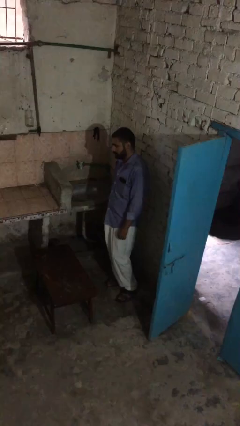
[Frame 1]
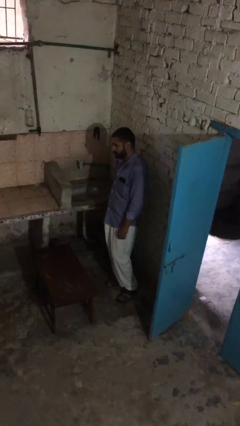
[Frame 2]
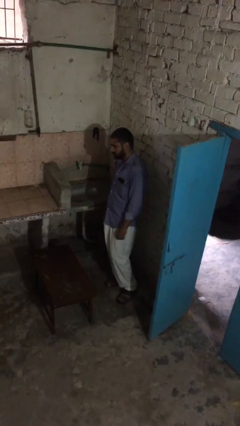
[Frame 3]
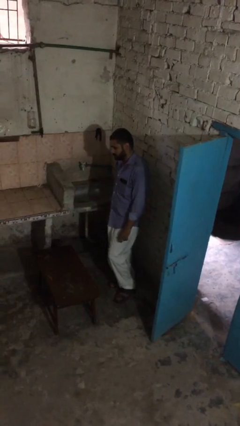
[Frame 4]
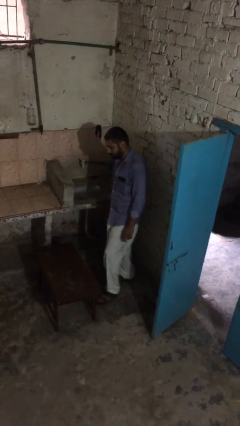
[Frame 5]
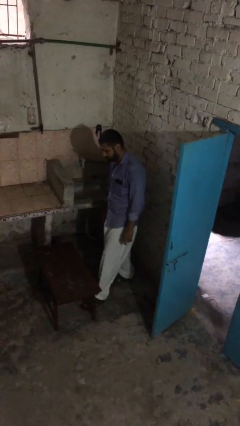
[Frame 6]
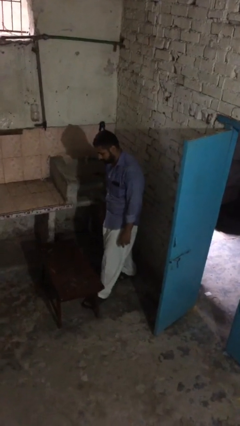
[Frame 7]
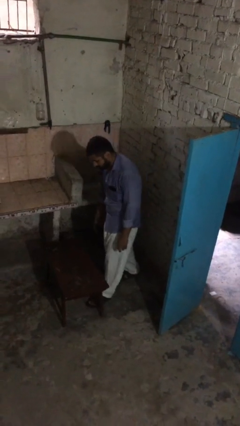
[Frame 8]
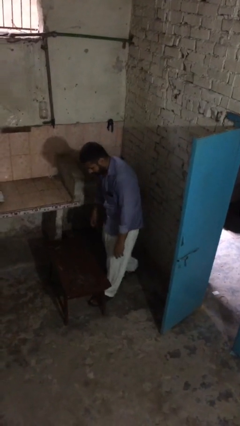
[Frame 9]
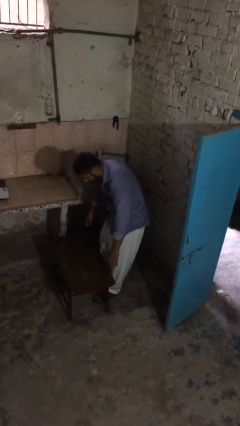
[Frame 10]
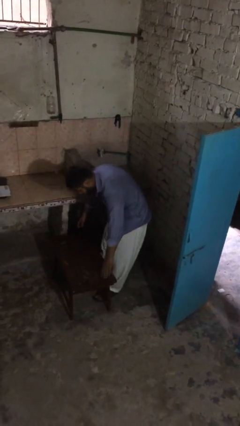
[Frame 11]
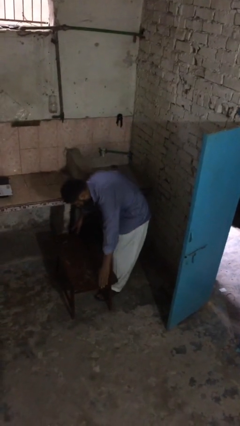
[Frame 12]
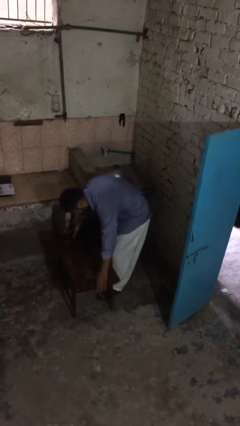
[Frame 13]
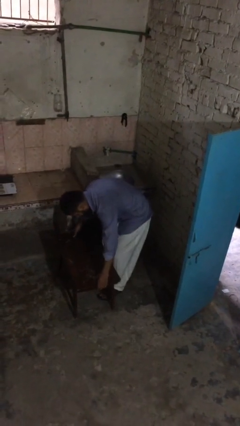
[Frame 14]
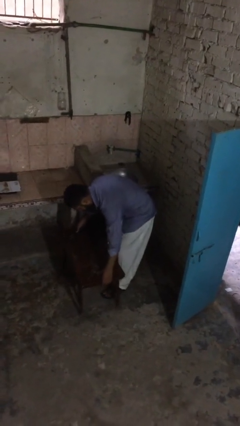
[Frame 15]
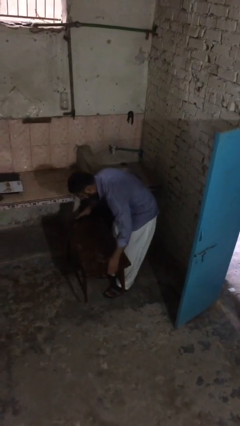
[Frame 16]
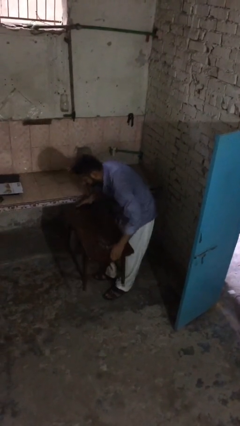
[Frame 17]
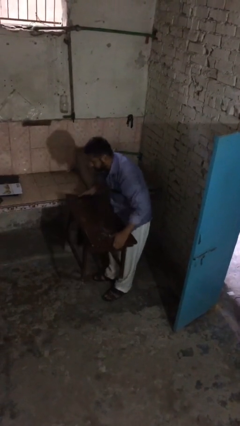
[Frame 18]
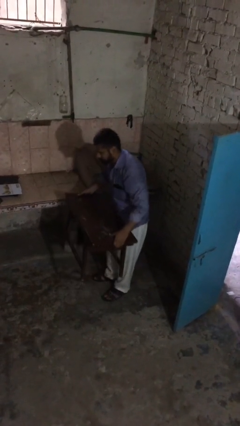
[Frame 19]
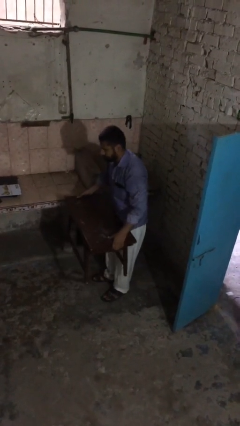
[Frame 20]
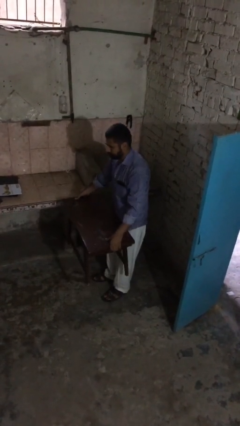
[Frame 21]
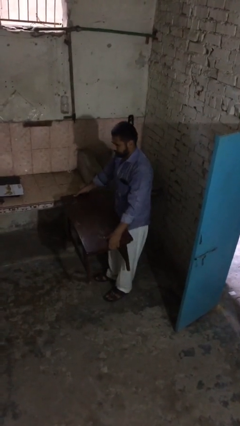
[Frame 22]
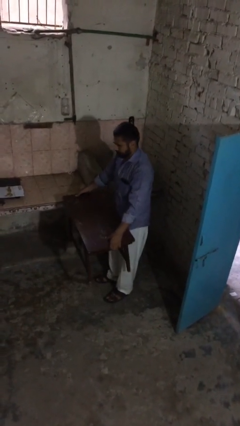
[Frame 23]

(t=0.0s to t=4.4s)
person picks up object from floor

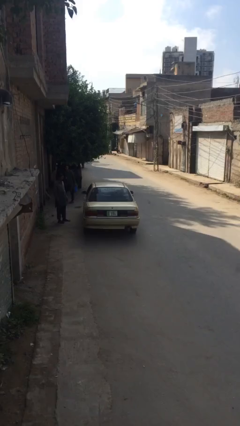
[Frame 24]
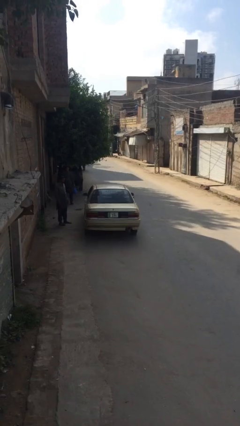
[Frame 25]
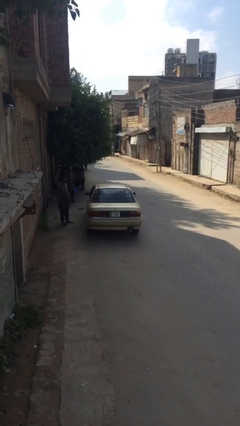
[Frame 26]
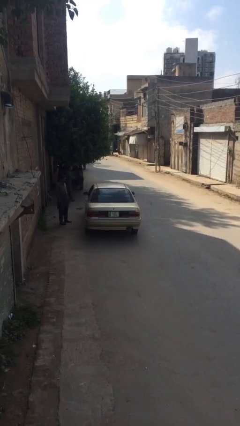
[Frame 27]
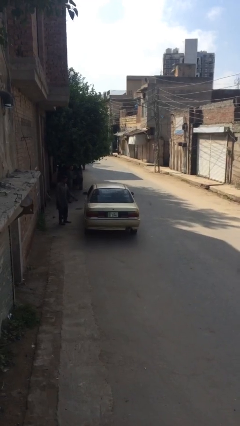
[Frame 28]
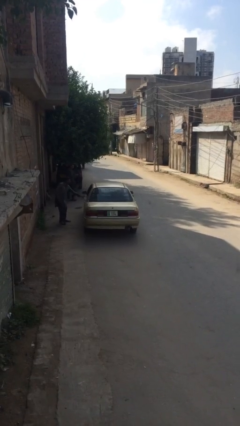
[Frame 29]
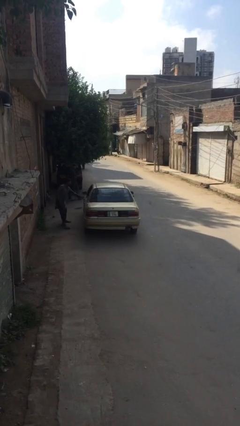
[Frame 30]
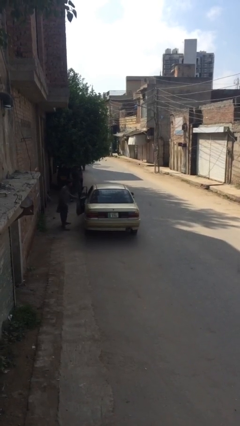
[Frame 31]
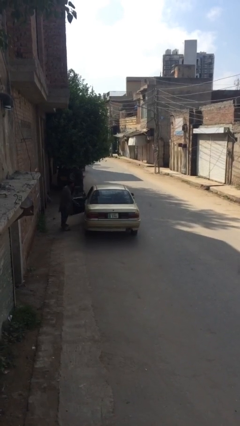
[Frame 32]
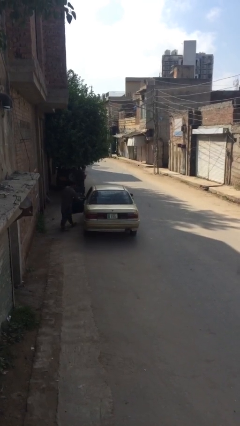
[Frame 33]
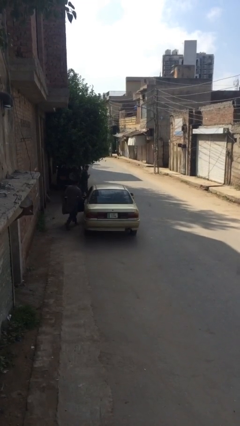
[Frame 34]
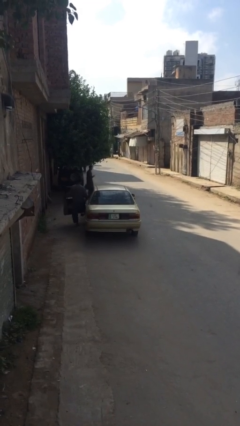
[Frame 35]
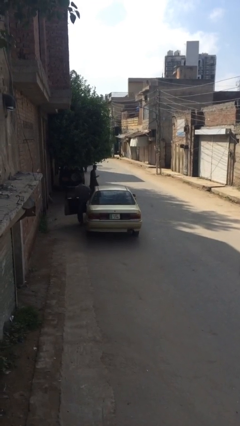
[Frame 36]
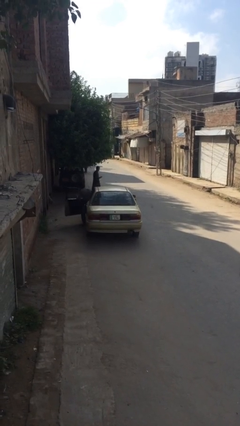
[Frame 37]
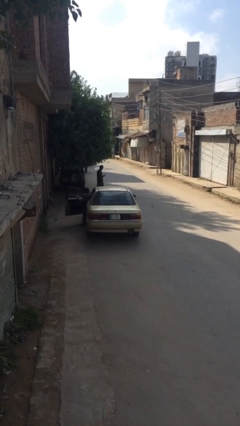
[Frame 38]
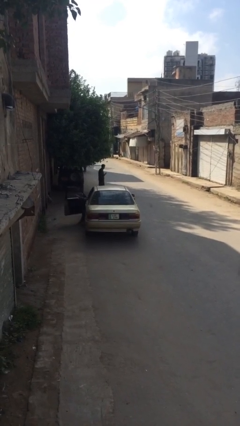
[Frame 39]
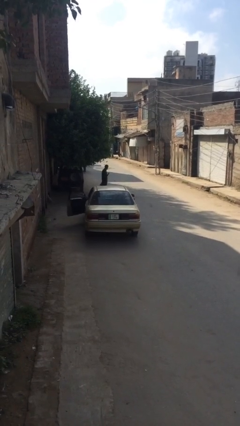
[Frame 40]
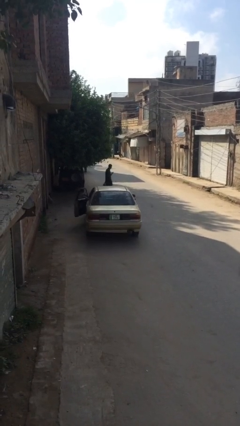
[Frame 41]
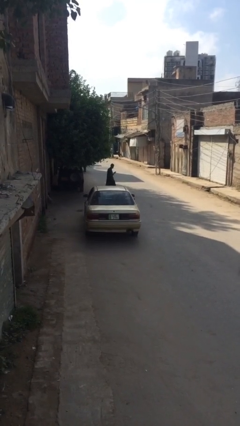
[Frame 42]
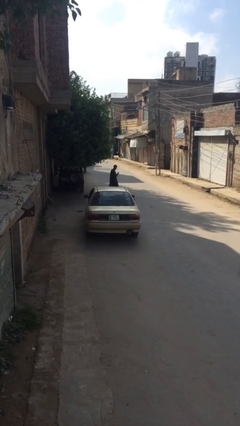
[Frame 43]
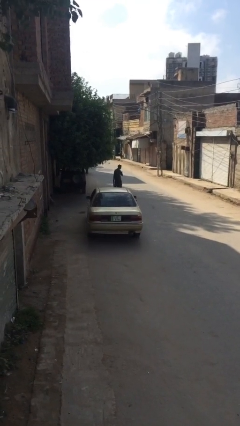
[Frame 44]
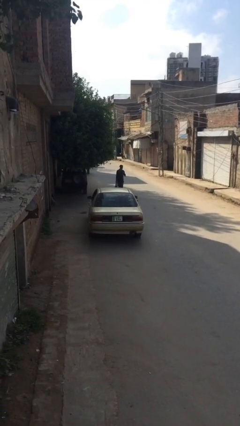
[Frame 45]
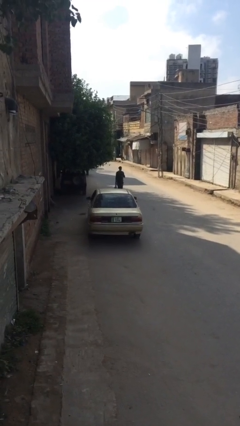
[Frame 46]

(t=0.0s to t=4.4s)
car picks up person

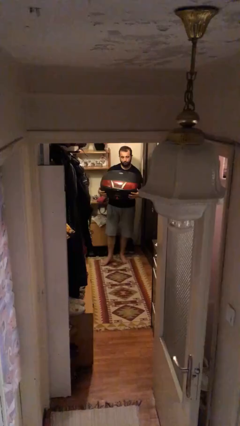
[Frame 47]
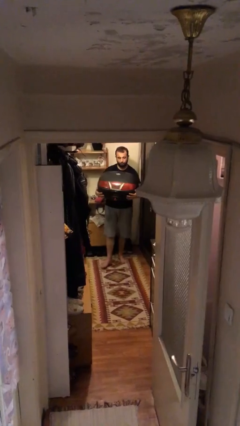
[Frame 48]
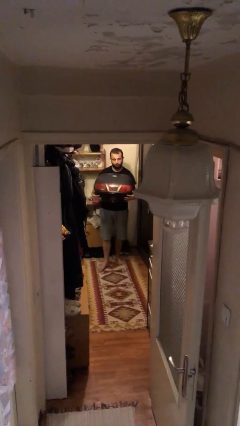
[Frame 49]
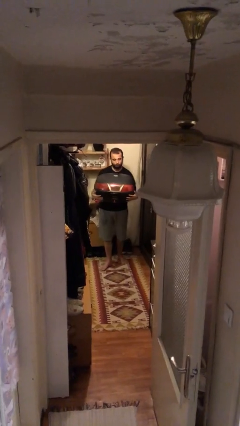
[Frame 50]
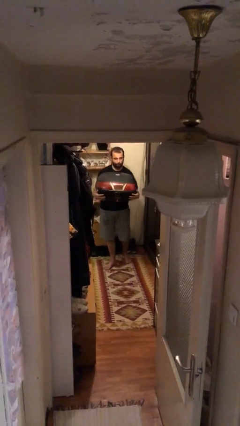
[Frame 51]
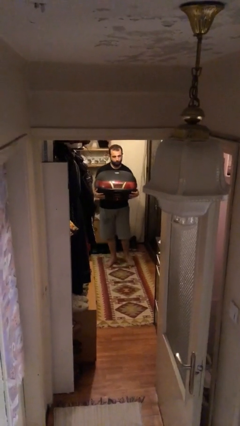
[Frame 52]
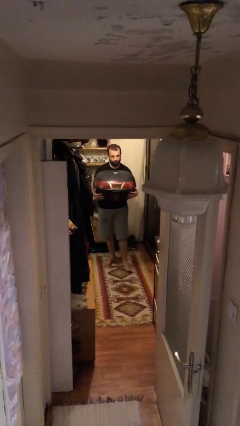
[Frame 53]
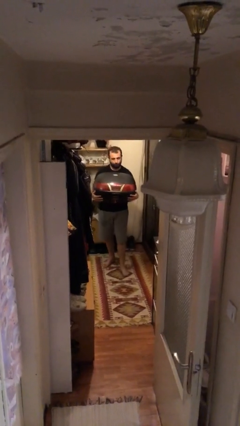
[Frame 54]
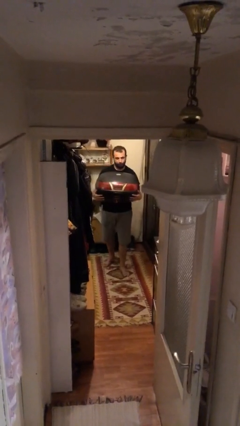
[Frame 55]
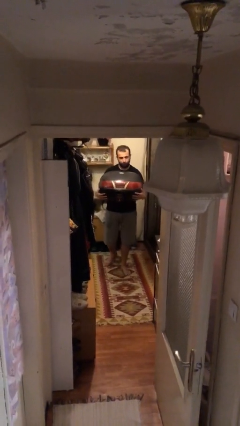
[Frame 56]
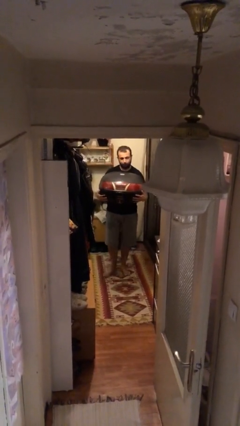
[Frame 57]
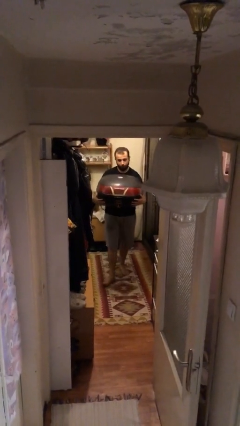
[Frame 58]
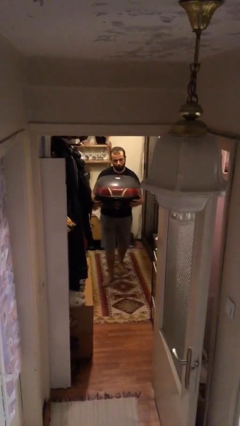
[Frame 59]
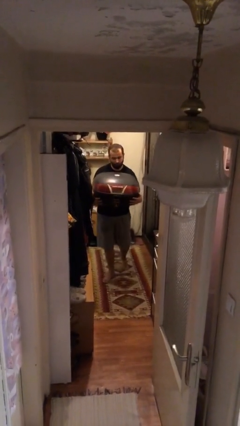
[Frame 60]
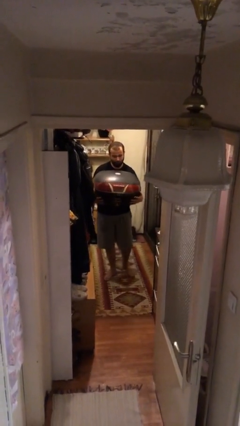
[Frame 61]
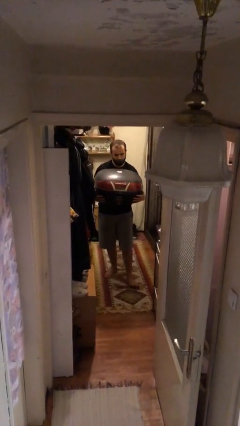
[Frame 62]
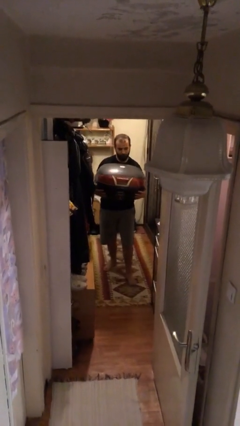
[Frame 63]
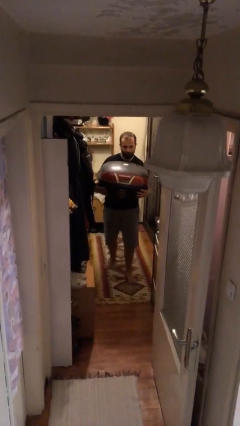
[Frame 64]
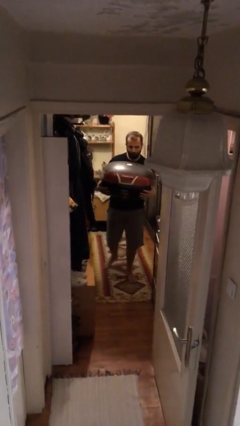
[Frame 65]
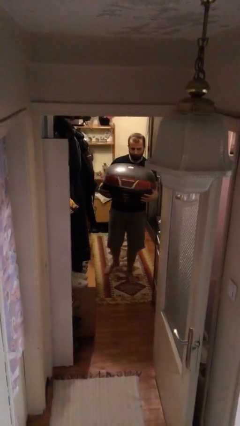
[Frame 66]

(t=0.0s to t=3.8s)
person carries heavy object

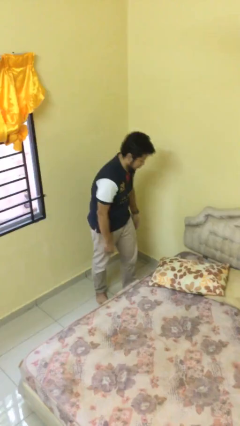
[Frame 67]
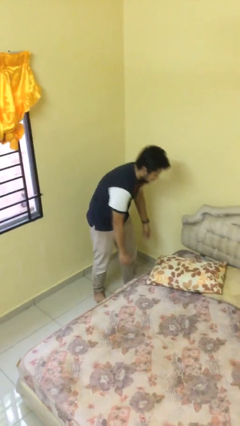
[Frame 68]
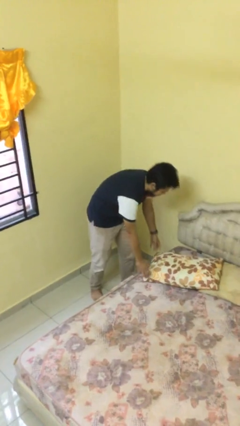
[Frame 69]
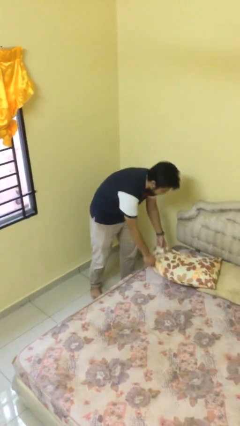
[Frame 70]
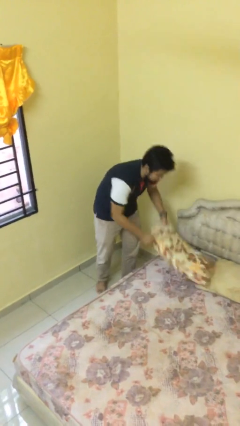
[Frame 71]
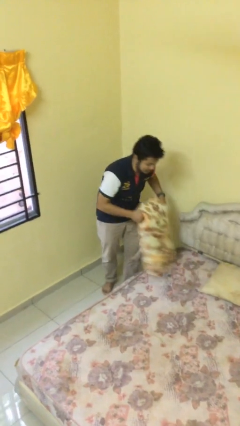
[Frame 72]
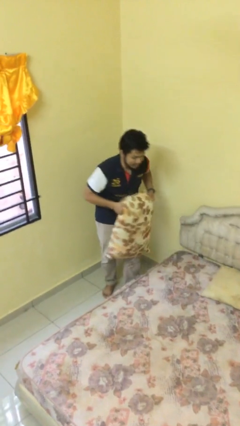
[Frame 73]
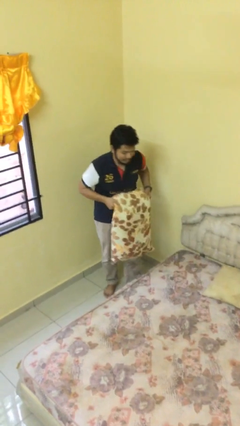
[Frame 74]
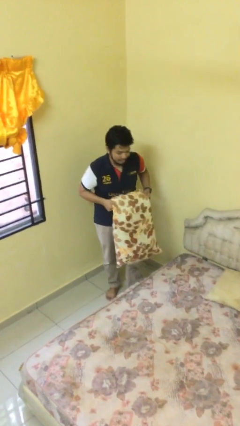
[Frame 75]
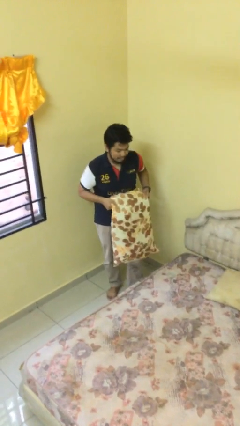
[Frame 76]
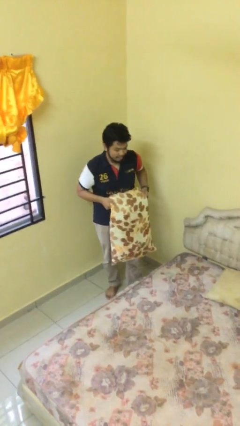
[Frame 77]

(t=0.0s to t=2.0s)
person picks up object from bed

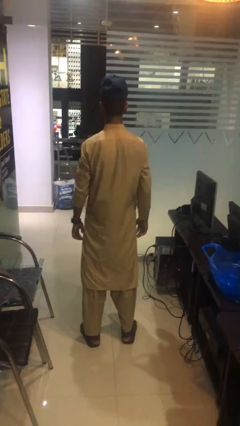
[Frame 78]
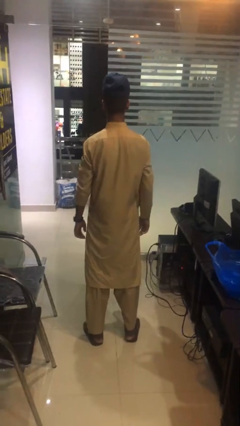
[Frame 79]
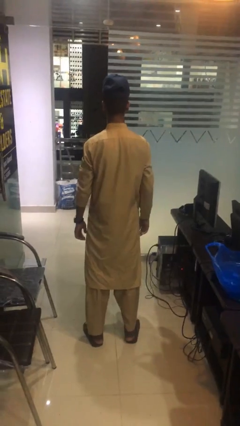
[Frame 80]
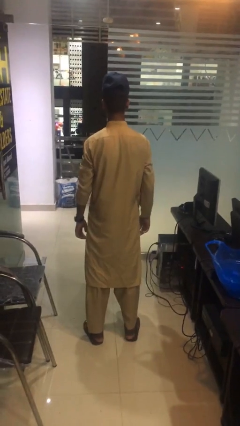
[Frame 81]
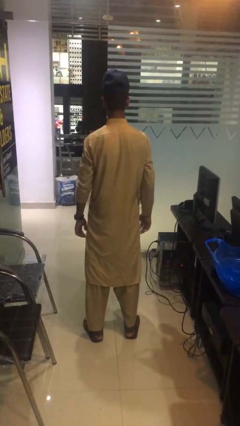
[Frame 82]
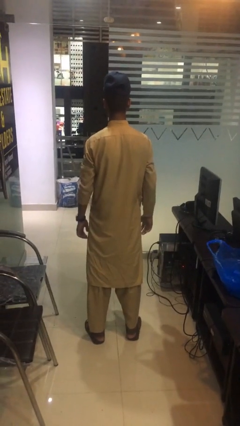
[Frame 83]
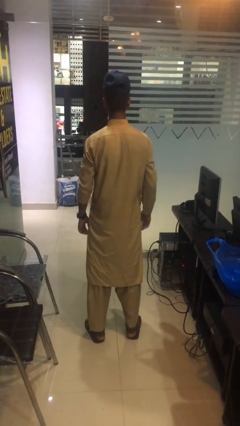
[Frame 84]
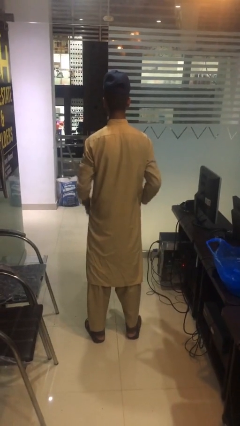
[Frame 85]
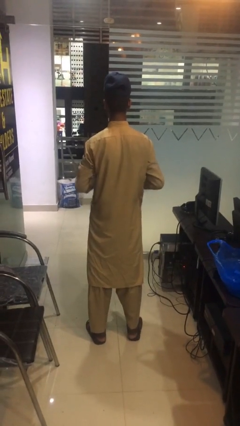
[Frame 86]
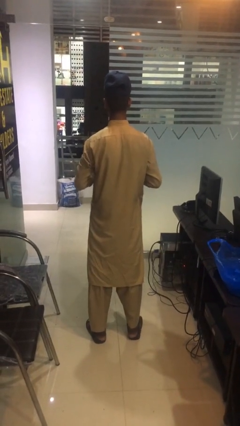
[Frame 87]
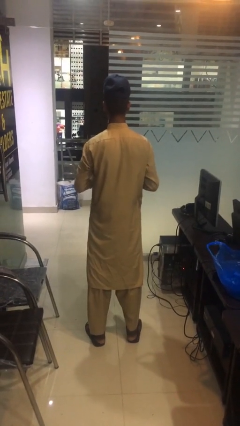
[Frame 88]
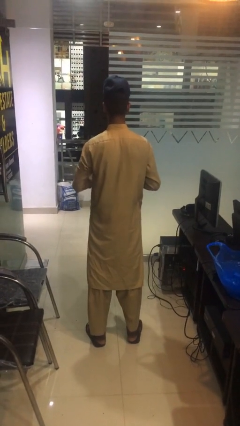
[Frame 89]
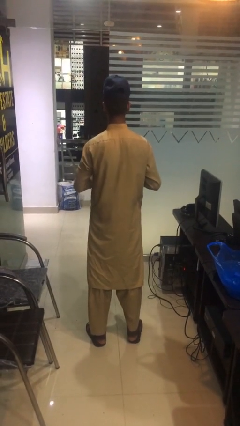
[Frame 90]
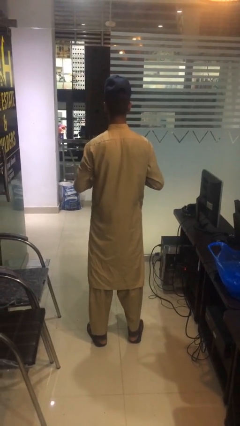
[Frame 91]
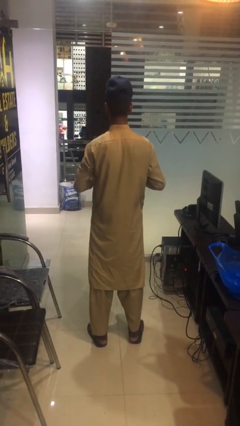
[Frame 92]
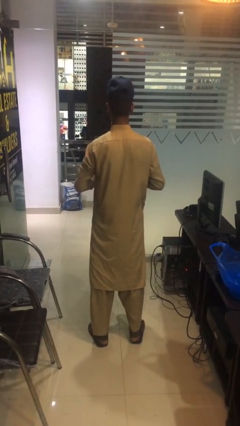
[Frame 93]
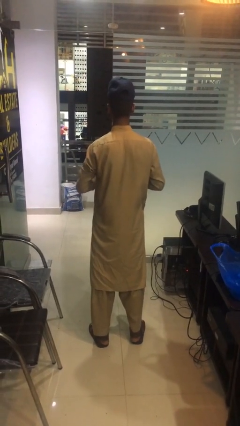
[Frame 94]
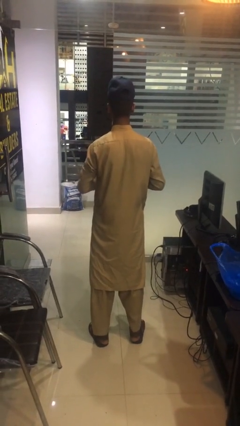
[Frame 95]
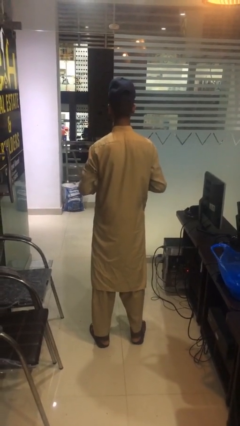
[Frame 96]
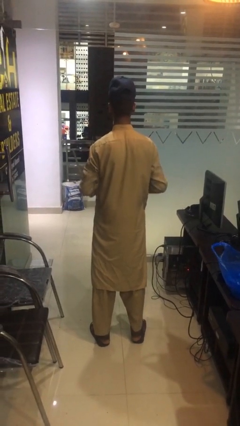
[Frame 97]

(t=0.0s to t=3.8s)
person cracks knuckles
